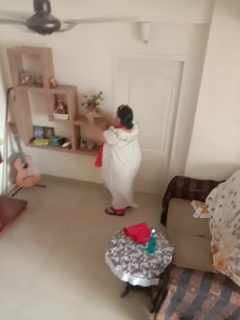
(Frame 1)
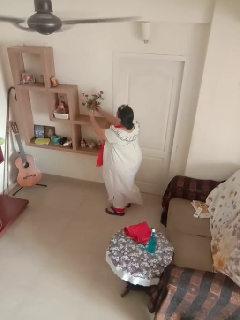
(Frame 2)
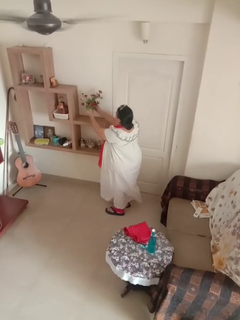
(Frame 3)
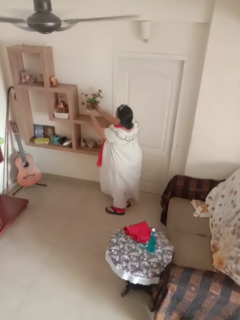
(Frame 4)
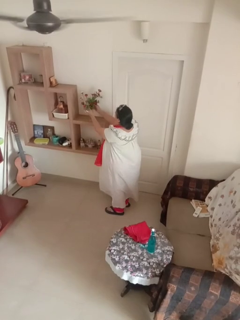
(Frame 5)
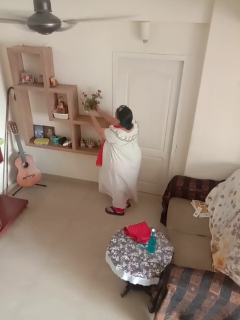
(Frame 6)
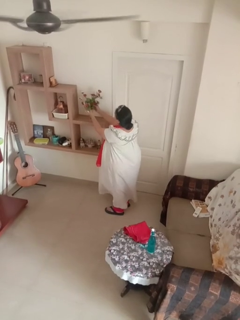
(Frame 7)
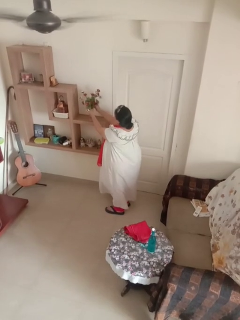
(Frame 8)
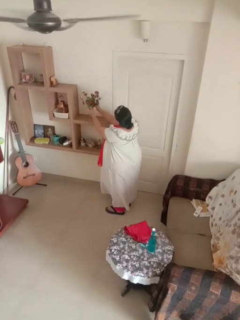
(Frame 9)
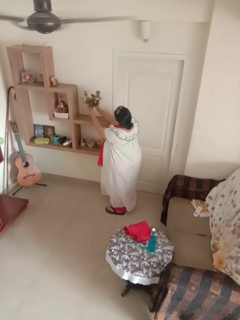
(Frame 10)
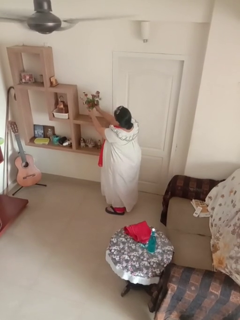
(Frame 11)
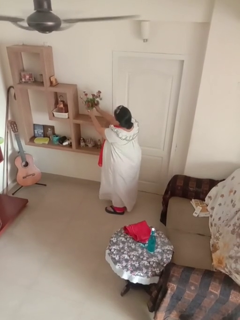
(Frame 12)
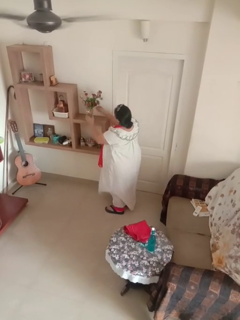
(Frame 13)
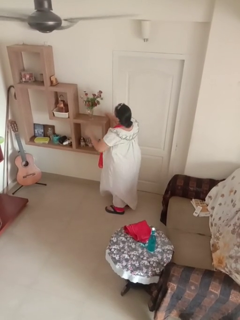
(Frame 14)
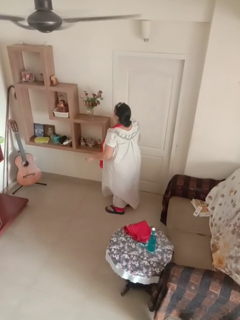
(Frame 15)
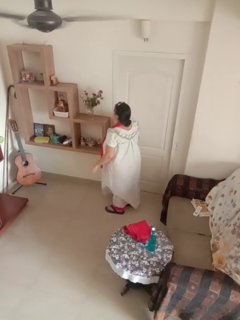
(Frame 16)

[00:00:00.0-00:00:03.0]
person arranges flowers in vase

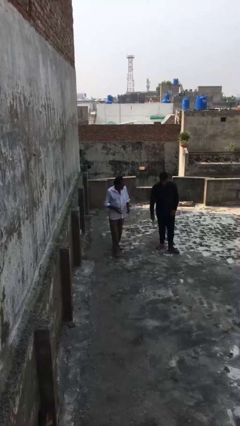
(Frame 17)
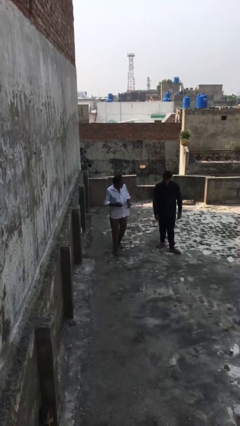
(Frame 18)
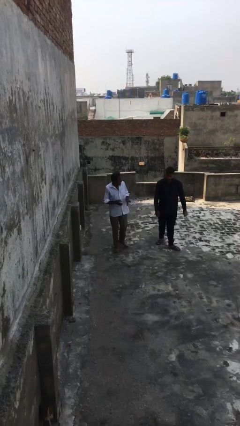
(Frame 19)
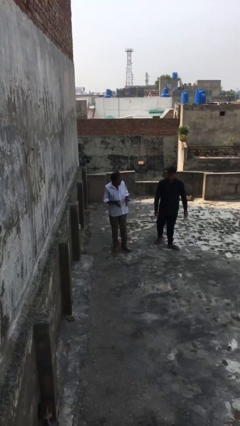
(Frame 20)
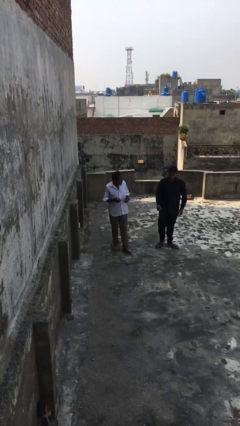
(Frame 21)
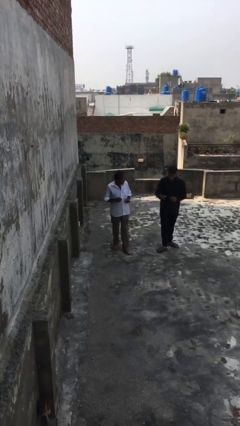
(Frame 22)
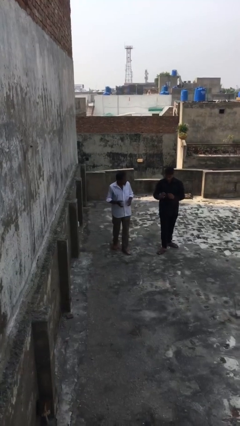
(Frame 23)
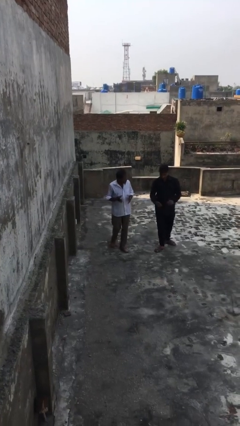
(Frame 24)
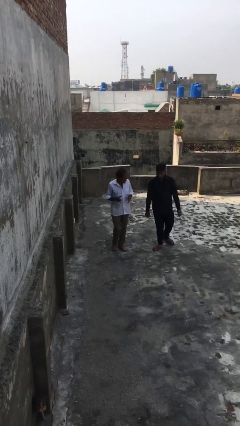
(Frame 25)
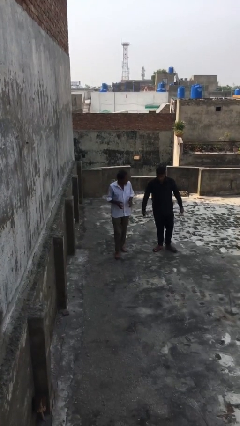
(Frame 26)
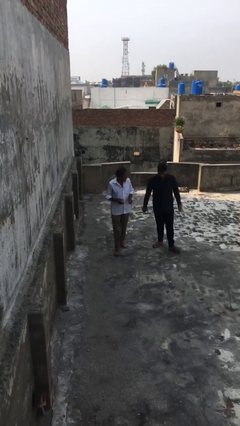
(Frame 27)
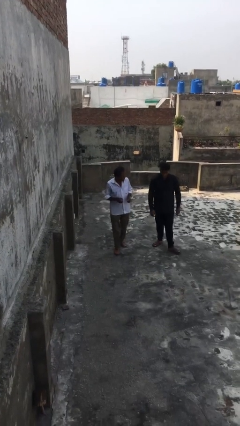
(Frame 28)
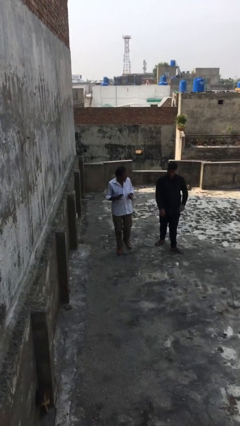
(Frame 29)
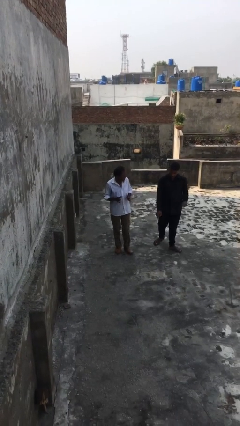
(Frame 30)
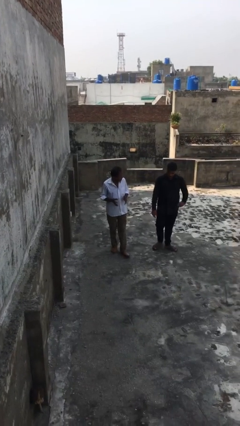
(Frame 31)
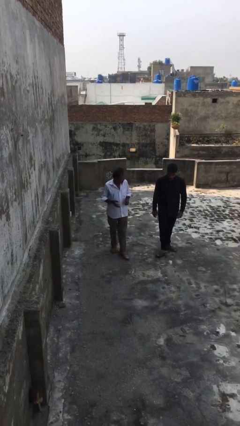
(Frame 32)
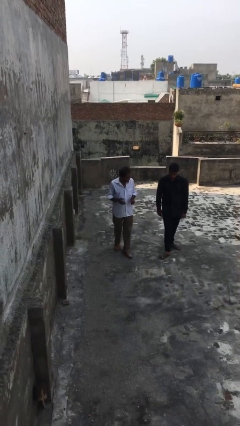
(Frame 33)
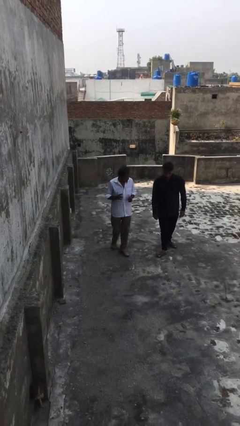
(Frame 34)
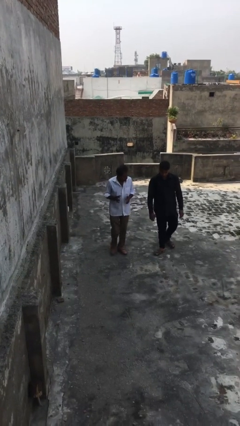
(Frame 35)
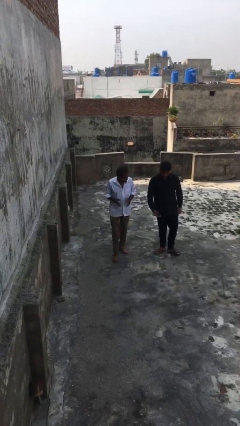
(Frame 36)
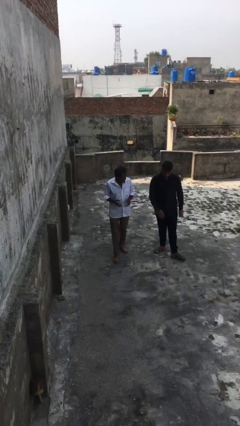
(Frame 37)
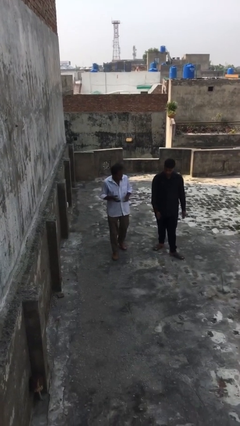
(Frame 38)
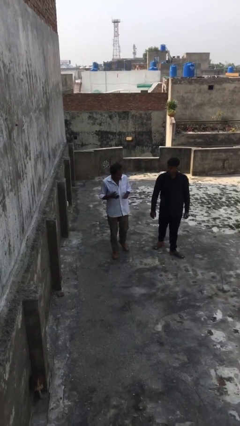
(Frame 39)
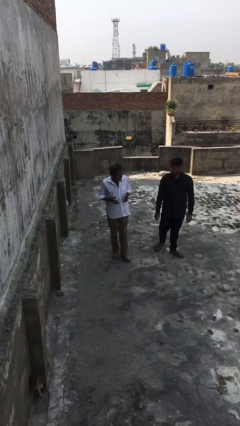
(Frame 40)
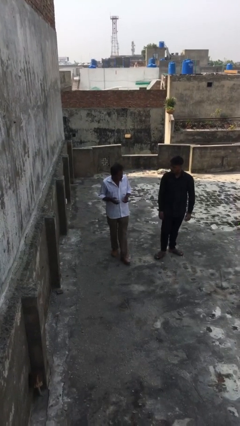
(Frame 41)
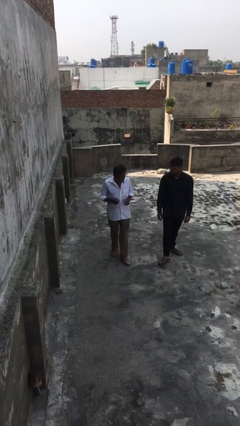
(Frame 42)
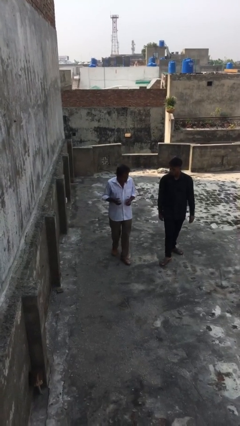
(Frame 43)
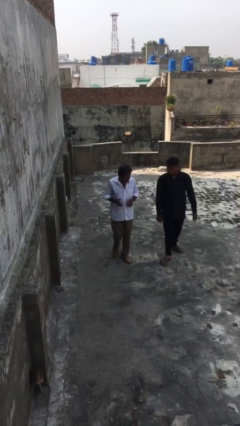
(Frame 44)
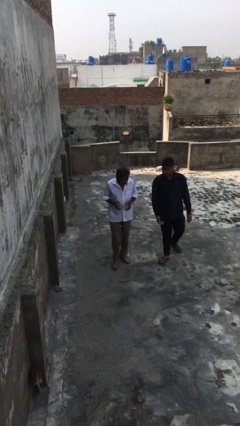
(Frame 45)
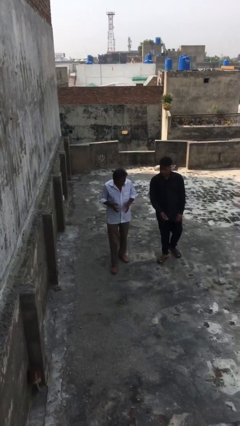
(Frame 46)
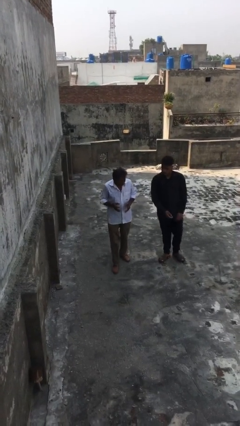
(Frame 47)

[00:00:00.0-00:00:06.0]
person talks to person

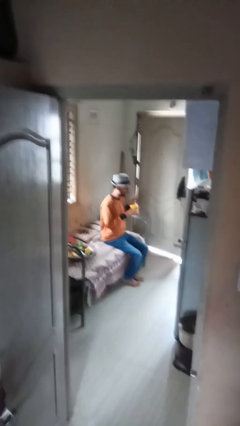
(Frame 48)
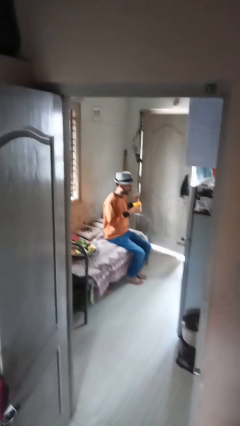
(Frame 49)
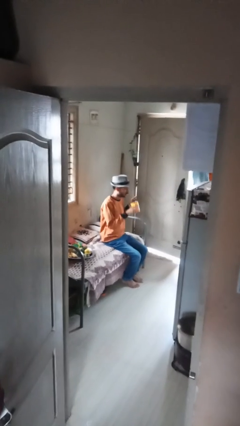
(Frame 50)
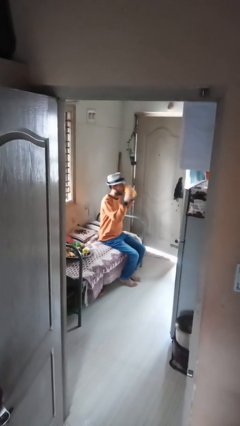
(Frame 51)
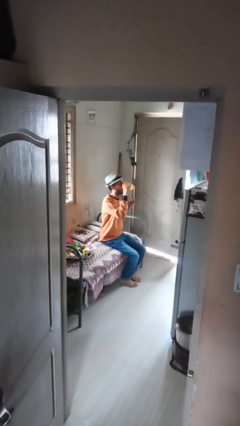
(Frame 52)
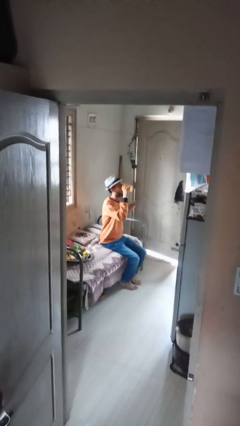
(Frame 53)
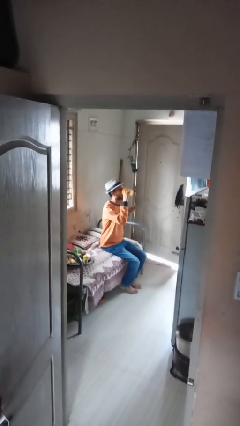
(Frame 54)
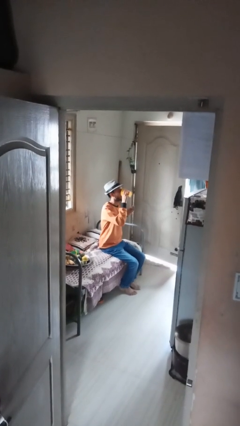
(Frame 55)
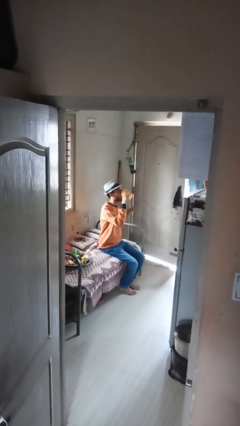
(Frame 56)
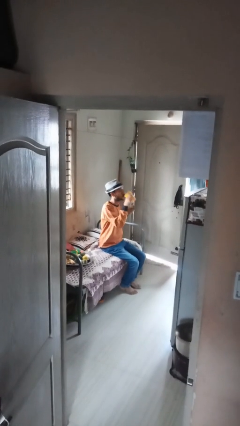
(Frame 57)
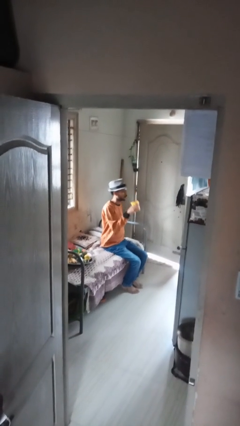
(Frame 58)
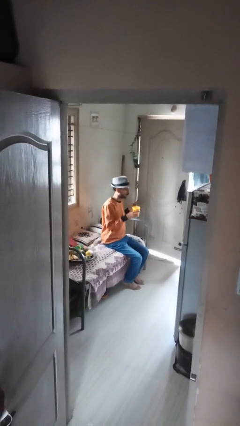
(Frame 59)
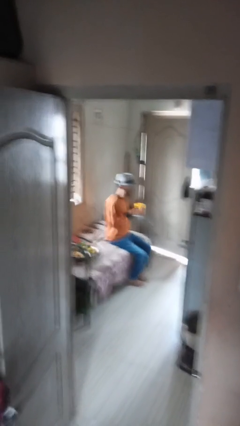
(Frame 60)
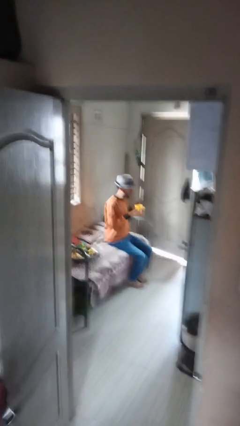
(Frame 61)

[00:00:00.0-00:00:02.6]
person drinks from mug

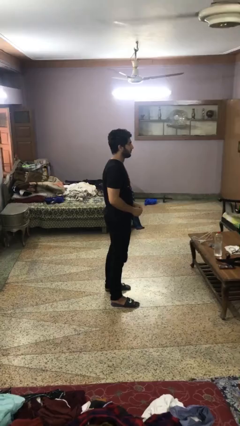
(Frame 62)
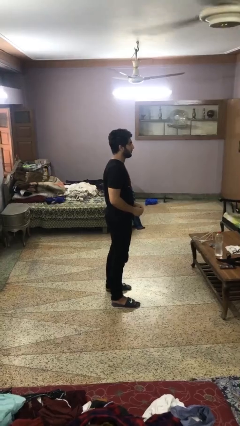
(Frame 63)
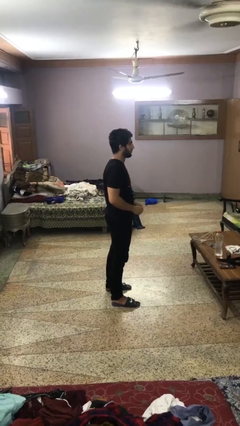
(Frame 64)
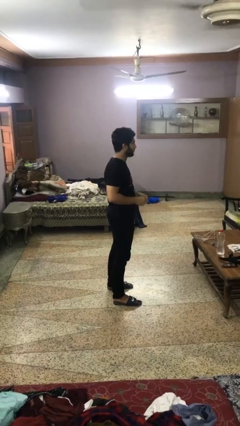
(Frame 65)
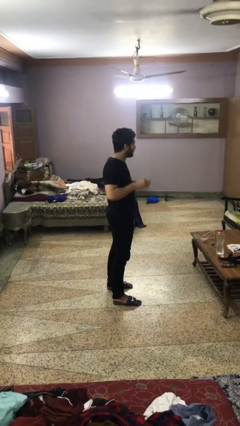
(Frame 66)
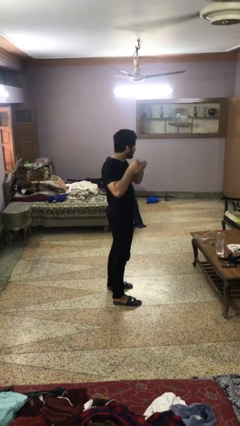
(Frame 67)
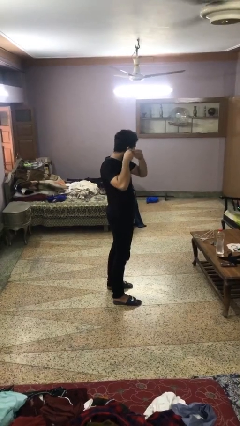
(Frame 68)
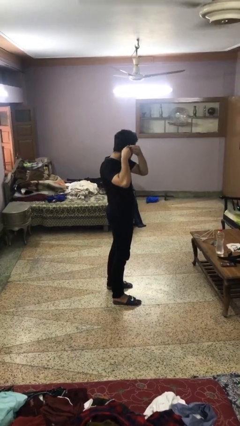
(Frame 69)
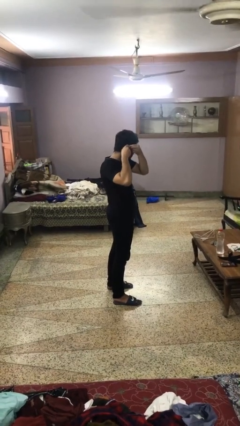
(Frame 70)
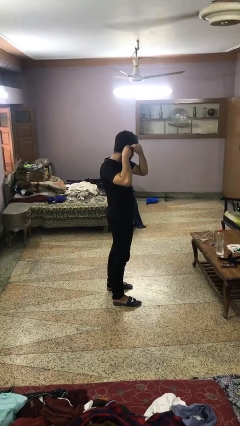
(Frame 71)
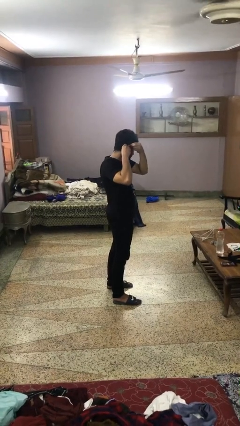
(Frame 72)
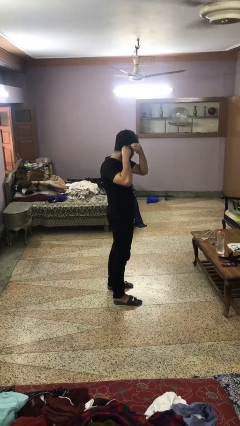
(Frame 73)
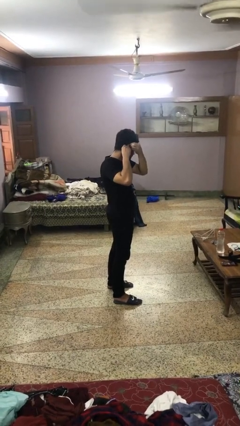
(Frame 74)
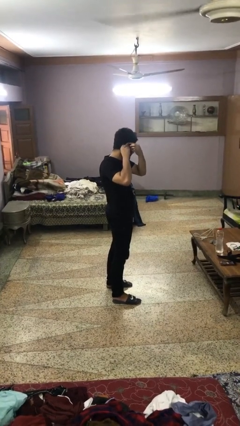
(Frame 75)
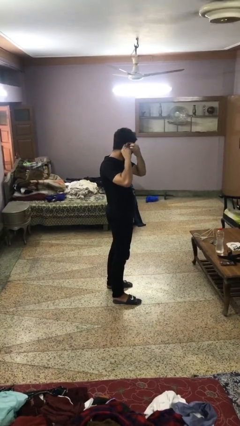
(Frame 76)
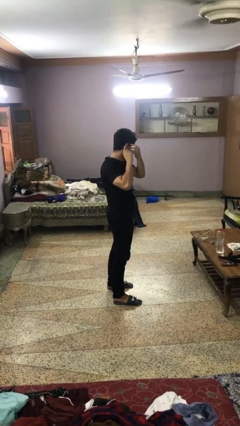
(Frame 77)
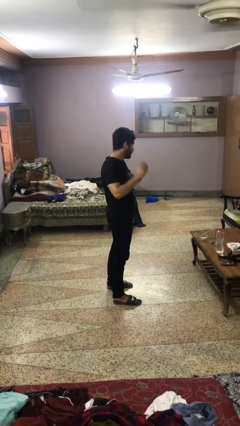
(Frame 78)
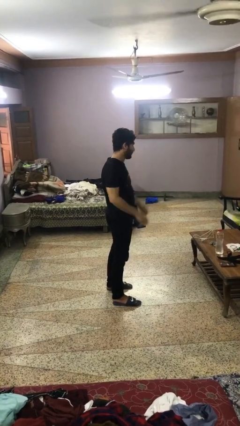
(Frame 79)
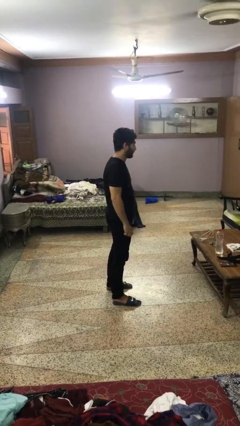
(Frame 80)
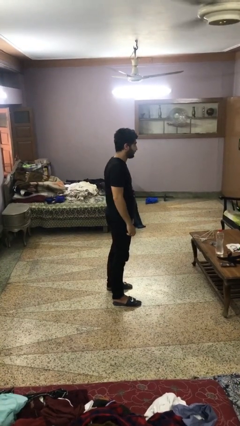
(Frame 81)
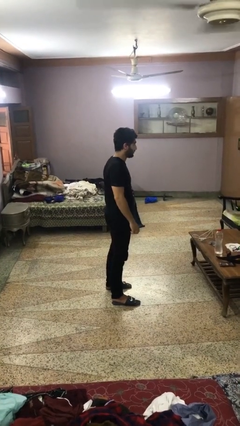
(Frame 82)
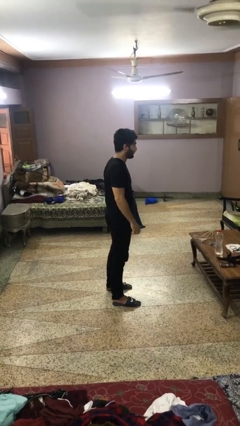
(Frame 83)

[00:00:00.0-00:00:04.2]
person puts on earrings

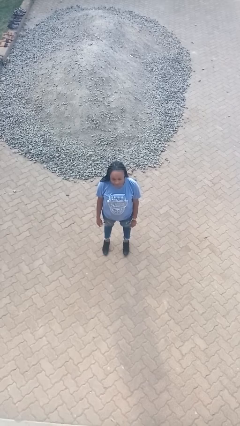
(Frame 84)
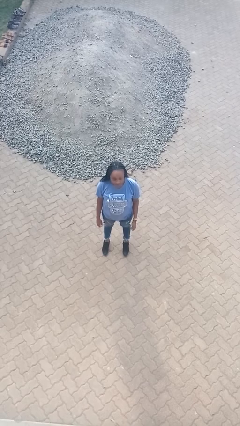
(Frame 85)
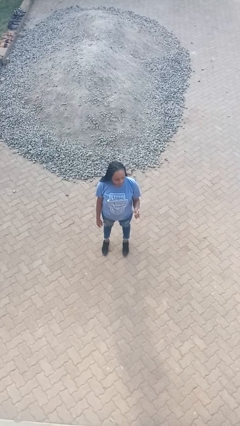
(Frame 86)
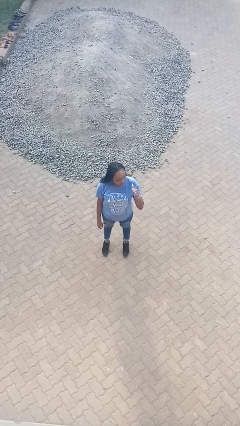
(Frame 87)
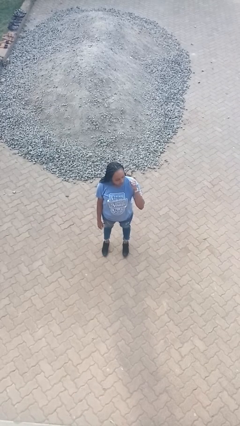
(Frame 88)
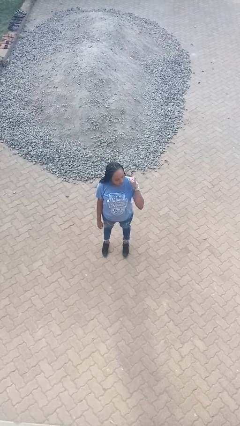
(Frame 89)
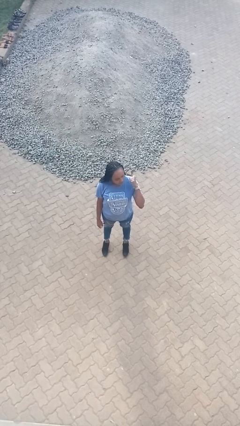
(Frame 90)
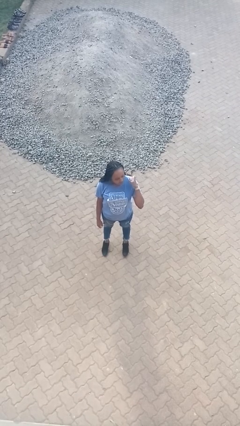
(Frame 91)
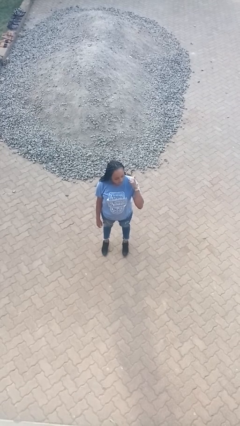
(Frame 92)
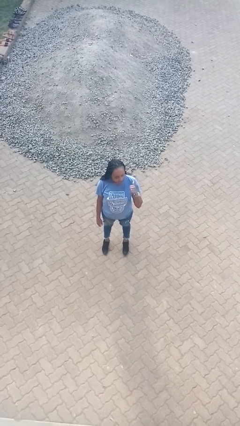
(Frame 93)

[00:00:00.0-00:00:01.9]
person gestures behind me

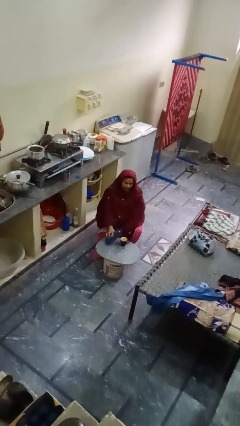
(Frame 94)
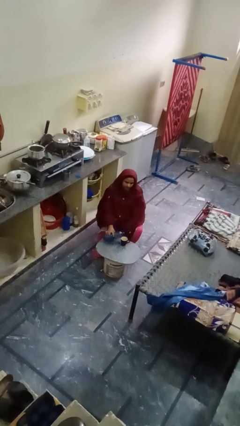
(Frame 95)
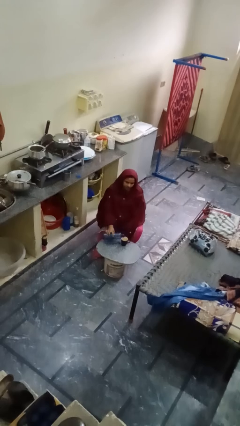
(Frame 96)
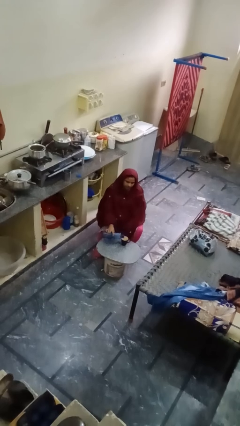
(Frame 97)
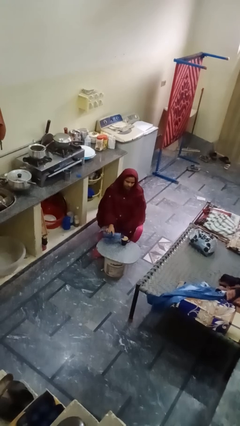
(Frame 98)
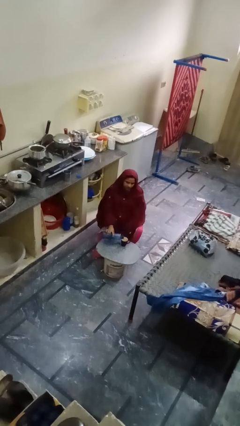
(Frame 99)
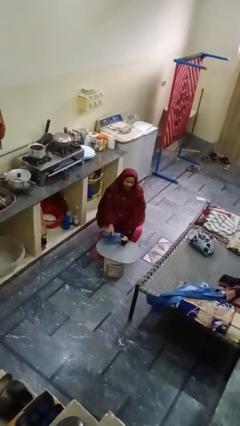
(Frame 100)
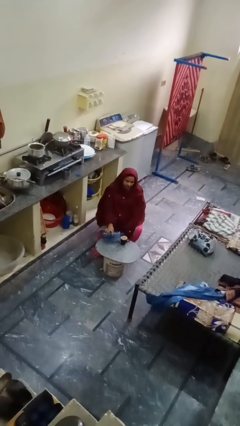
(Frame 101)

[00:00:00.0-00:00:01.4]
person pours liquid into cup
